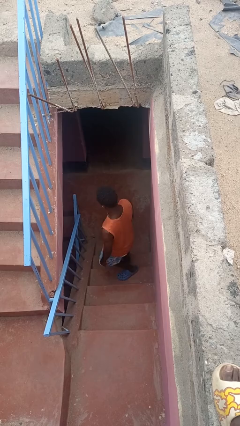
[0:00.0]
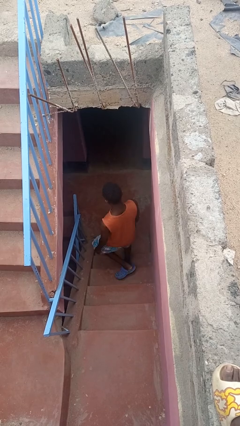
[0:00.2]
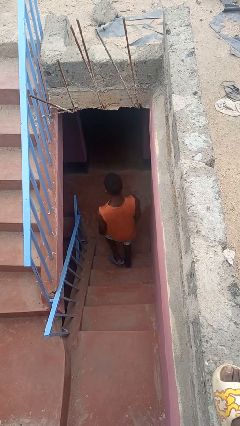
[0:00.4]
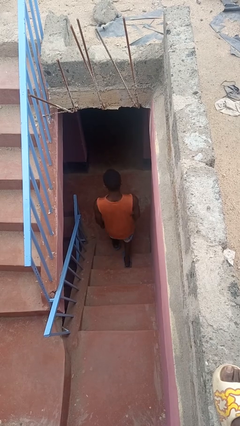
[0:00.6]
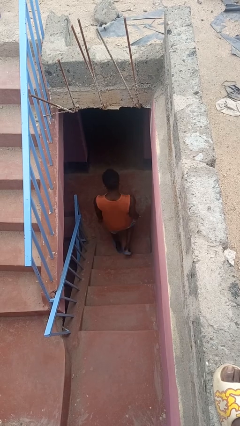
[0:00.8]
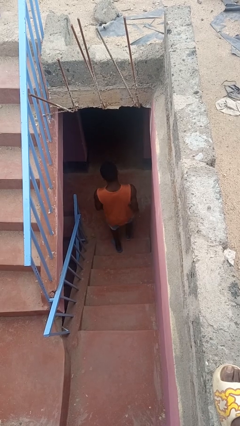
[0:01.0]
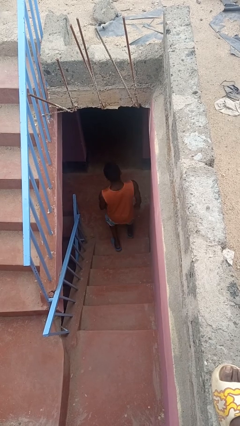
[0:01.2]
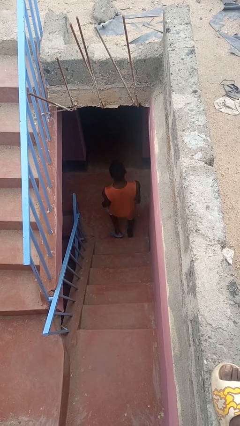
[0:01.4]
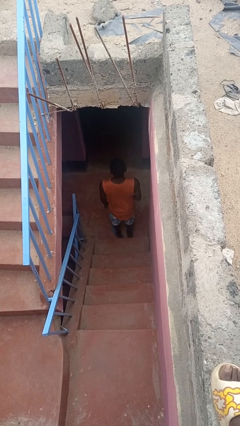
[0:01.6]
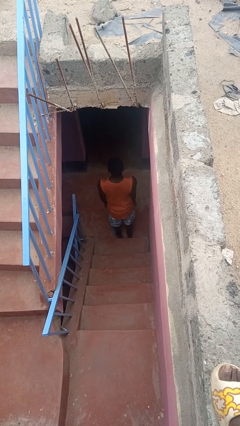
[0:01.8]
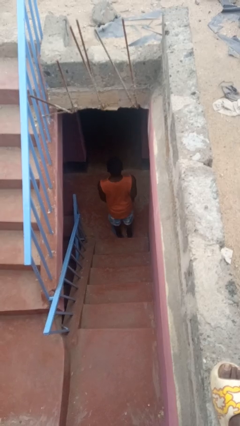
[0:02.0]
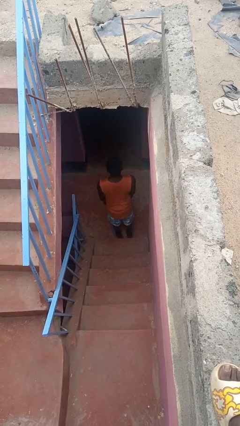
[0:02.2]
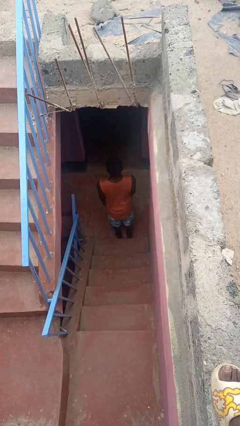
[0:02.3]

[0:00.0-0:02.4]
person climbs down stairs

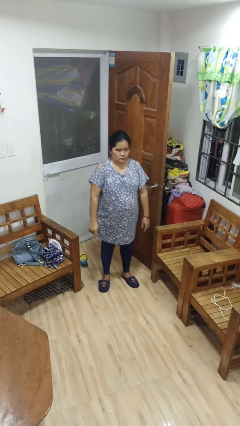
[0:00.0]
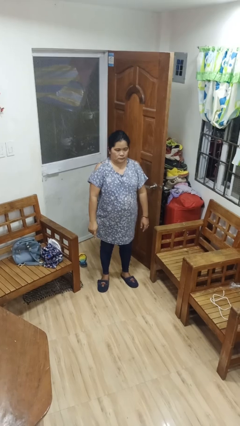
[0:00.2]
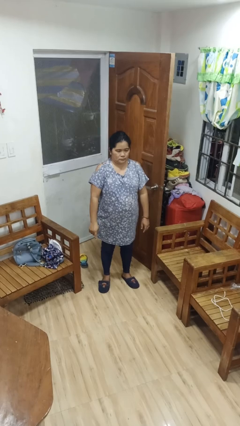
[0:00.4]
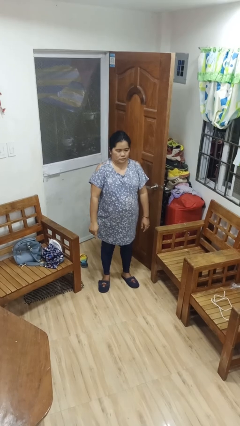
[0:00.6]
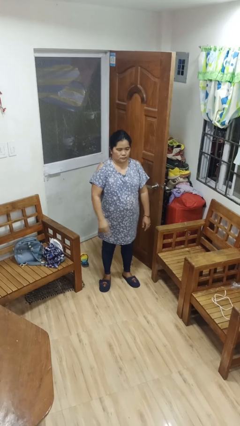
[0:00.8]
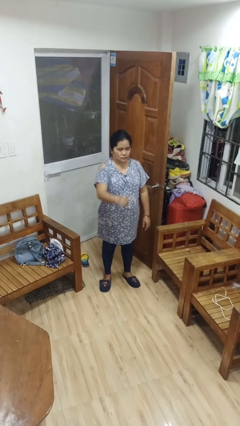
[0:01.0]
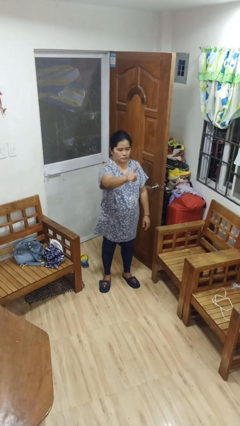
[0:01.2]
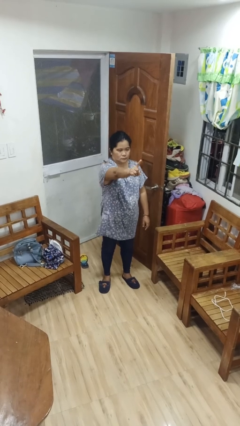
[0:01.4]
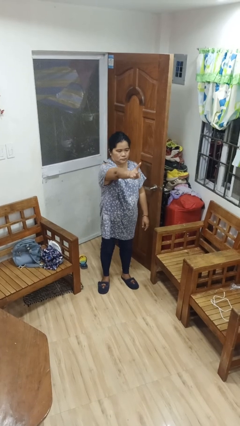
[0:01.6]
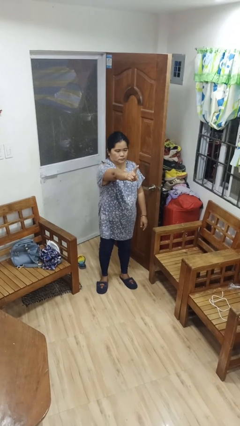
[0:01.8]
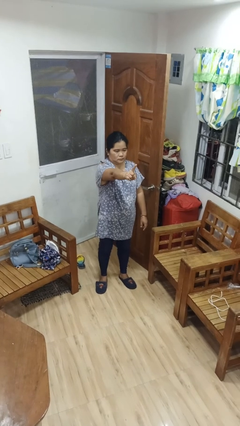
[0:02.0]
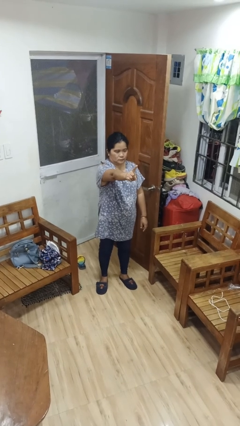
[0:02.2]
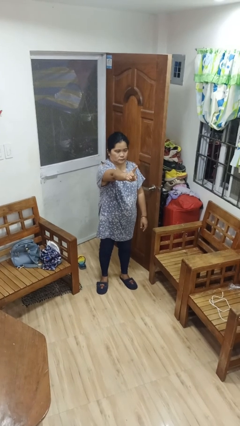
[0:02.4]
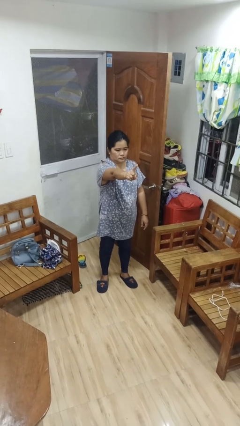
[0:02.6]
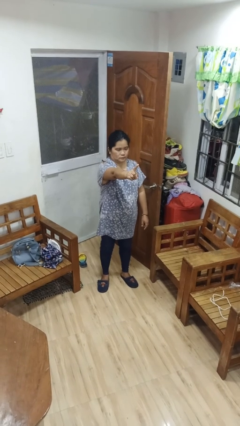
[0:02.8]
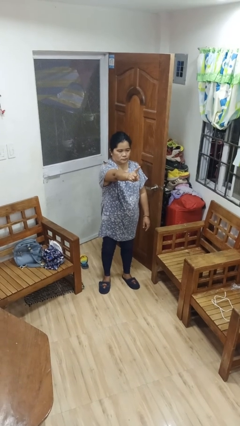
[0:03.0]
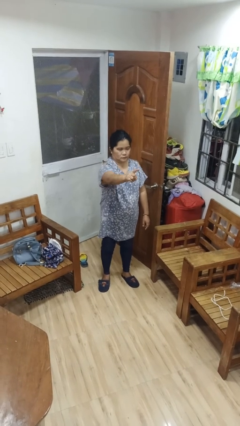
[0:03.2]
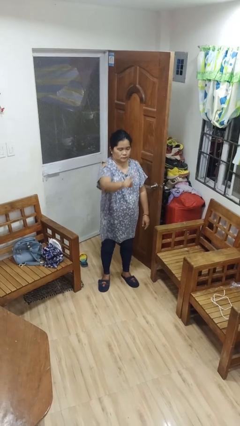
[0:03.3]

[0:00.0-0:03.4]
person gestures number one

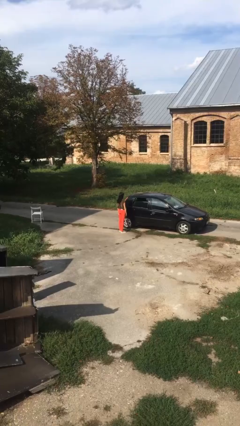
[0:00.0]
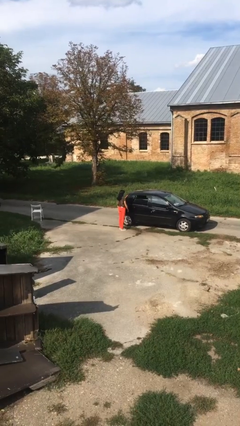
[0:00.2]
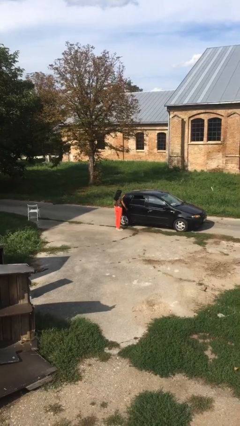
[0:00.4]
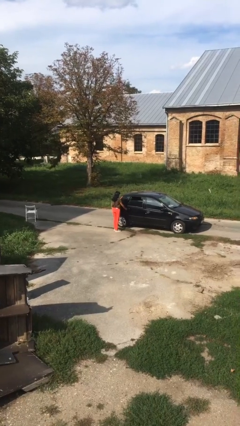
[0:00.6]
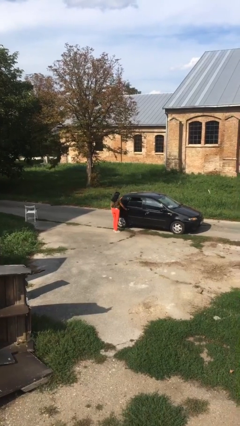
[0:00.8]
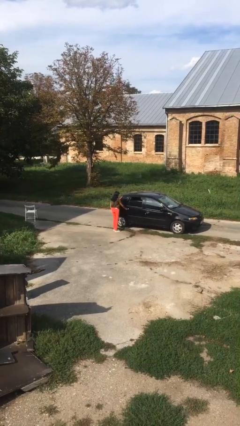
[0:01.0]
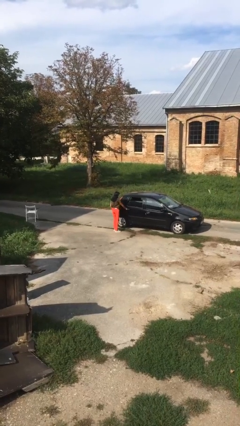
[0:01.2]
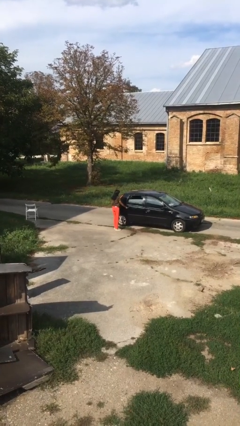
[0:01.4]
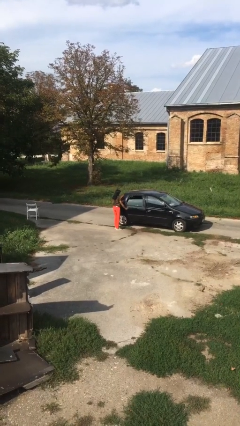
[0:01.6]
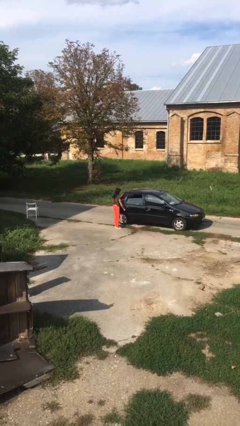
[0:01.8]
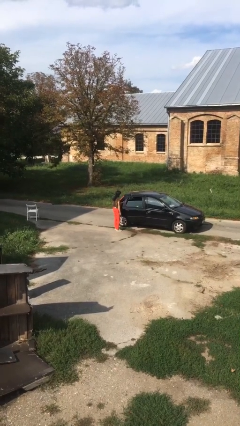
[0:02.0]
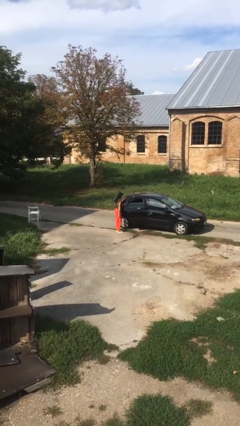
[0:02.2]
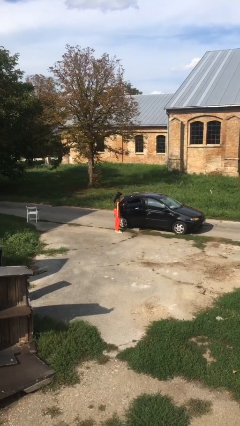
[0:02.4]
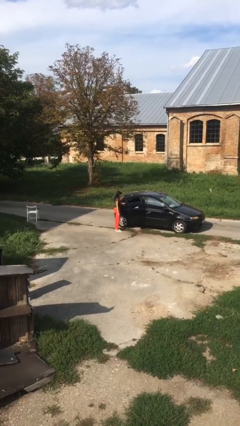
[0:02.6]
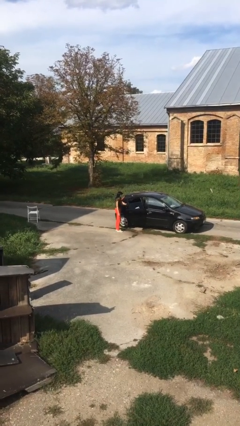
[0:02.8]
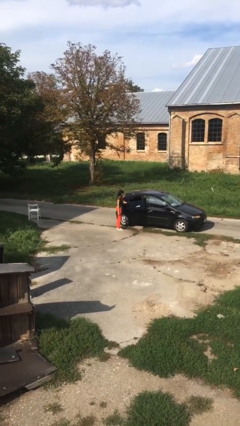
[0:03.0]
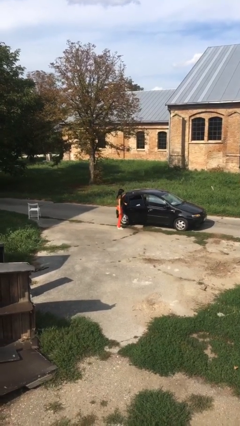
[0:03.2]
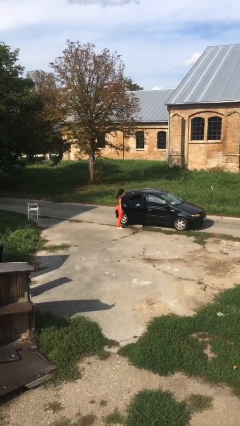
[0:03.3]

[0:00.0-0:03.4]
person opens car door

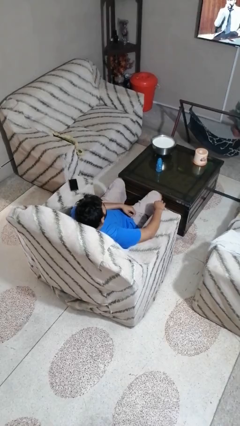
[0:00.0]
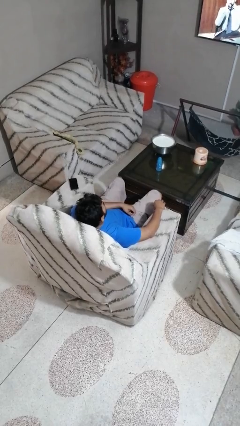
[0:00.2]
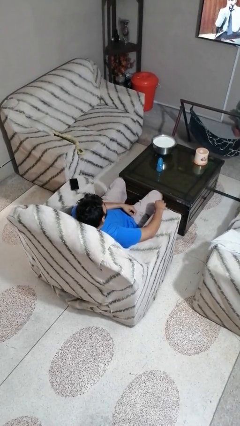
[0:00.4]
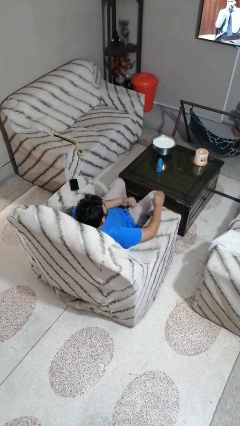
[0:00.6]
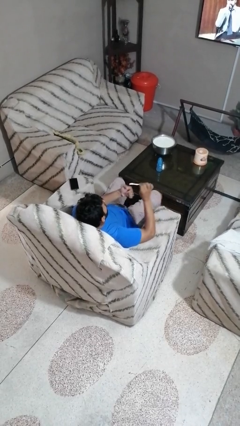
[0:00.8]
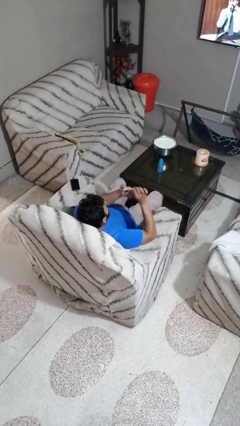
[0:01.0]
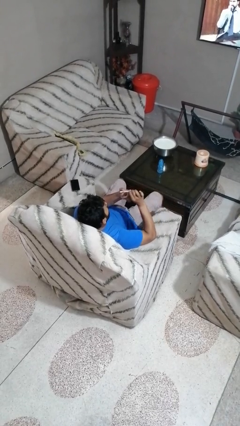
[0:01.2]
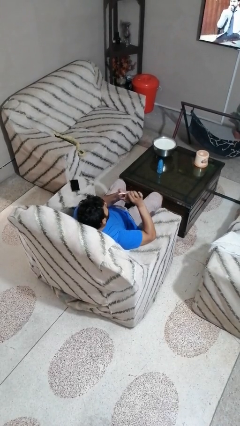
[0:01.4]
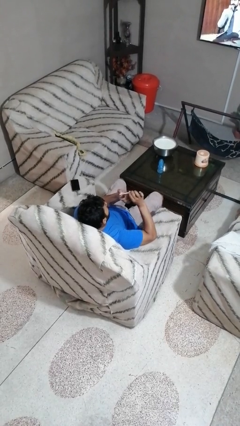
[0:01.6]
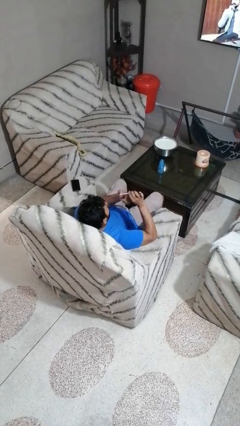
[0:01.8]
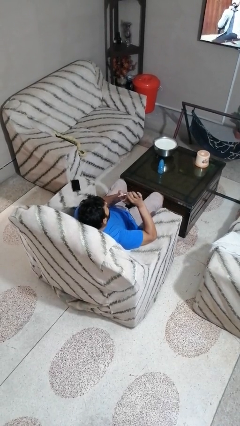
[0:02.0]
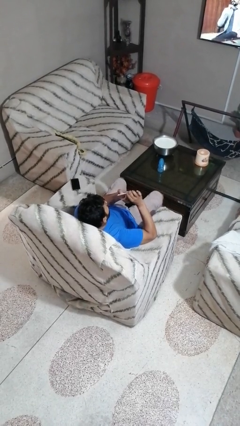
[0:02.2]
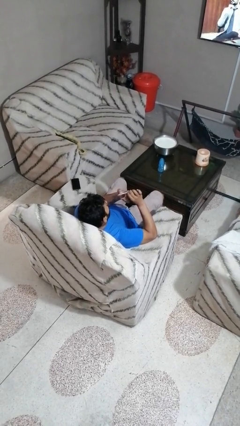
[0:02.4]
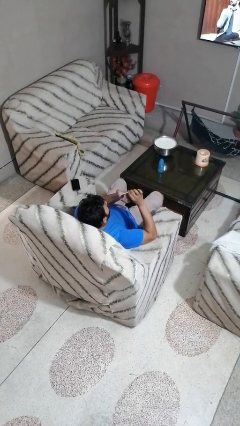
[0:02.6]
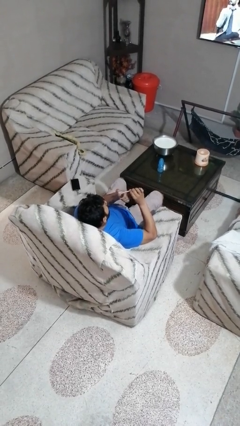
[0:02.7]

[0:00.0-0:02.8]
person files fingernails

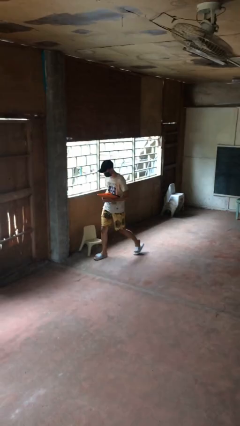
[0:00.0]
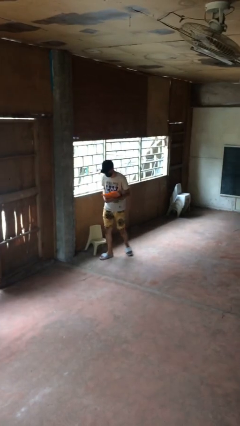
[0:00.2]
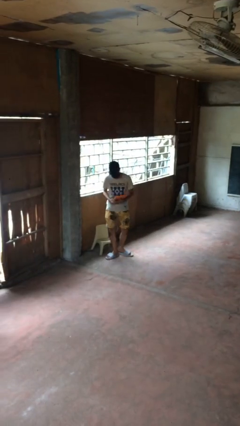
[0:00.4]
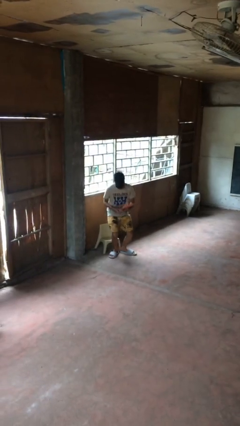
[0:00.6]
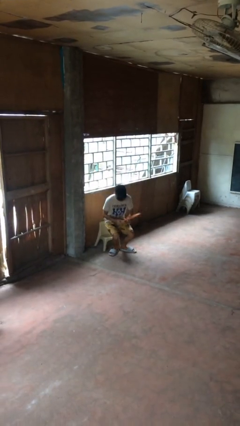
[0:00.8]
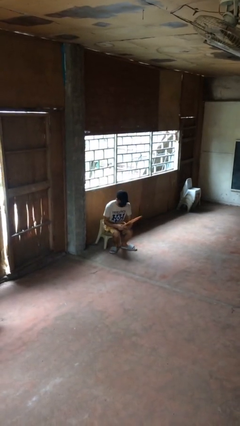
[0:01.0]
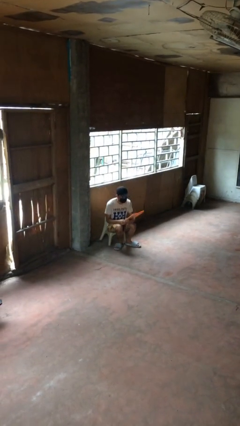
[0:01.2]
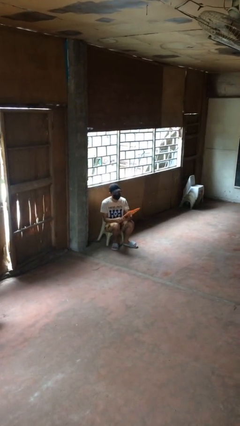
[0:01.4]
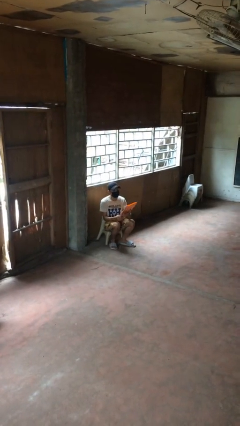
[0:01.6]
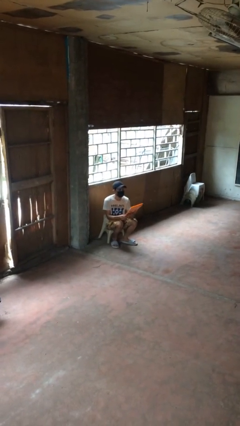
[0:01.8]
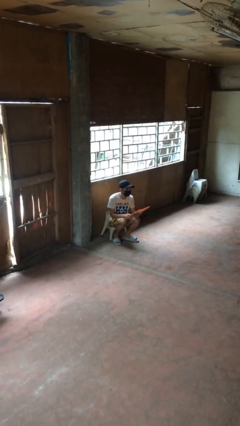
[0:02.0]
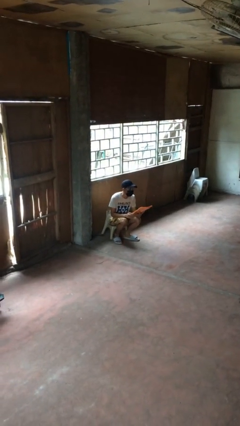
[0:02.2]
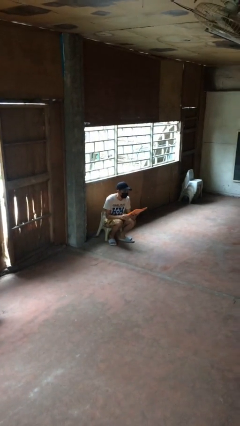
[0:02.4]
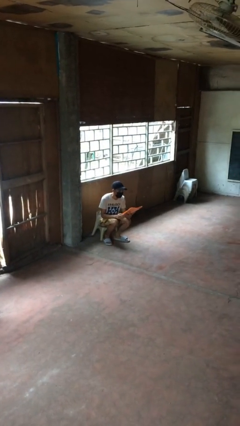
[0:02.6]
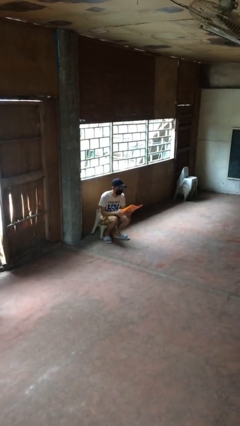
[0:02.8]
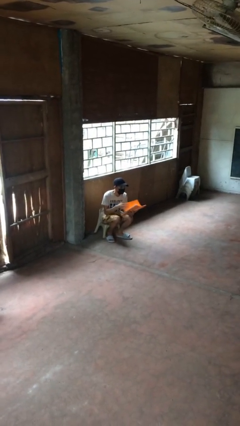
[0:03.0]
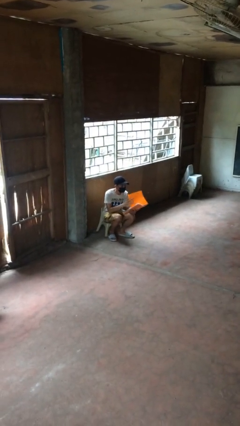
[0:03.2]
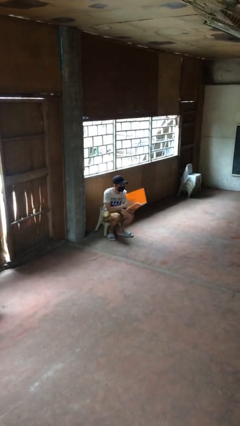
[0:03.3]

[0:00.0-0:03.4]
person sits down

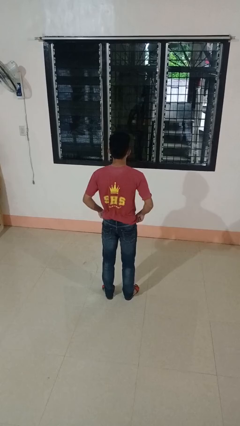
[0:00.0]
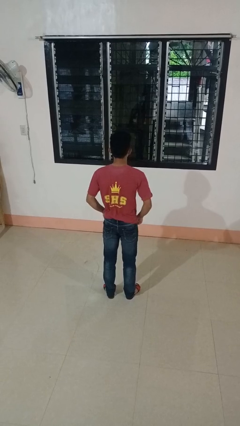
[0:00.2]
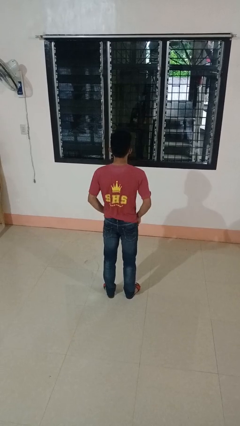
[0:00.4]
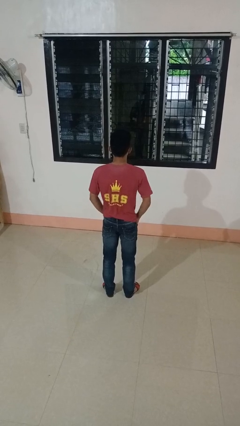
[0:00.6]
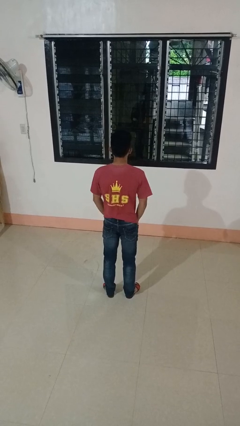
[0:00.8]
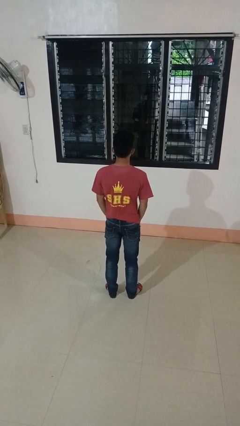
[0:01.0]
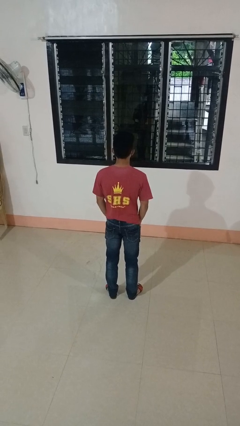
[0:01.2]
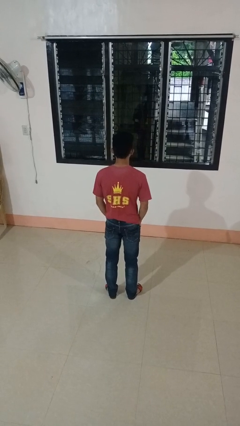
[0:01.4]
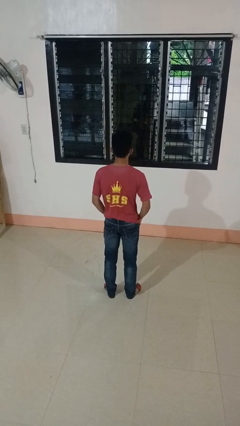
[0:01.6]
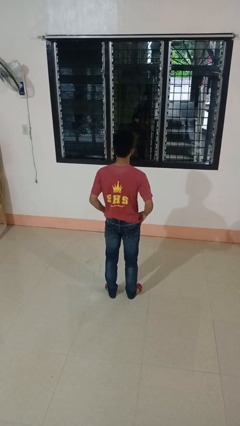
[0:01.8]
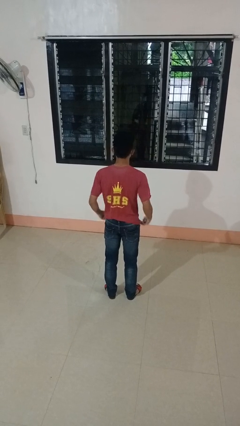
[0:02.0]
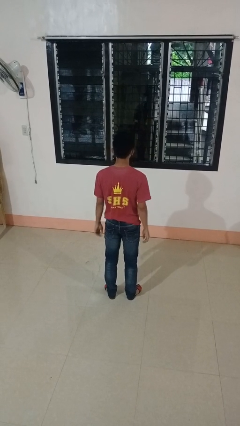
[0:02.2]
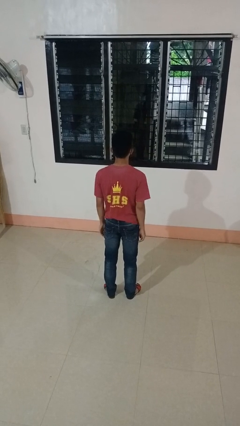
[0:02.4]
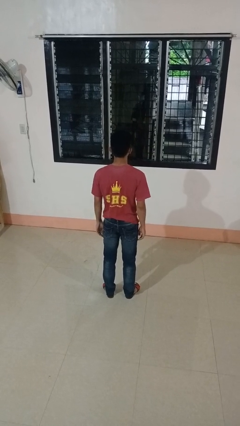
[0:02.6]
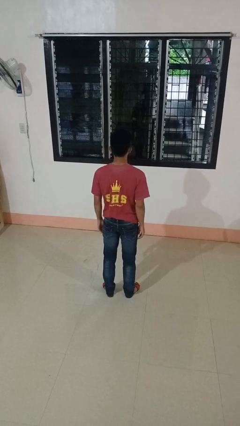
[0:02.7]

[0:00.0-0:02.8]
person puts hands in back pockets
